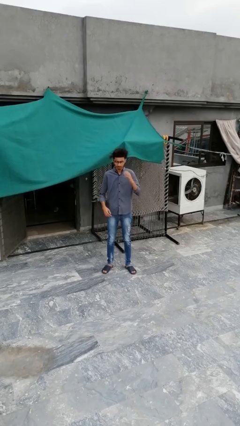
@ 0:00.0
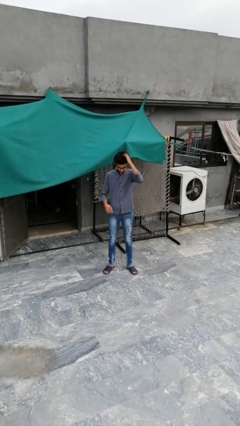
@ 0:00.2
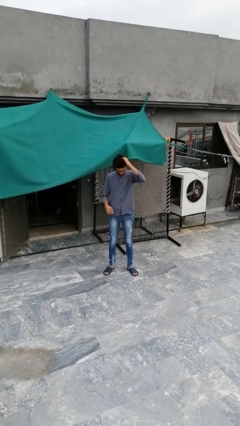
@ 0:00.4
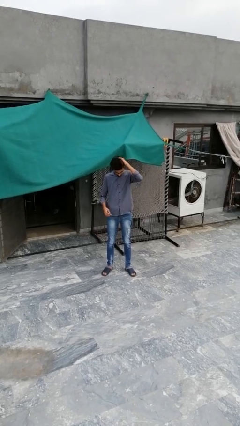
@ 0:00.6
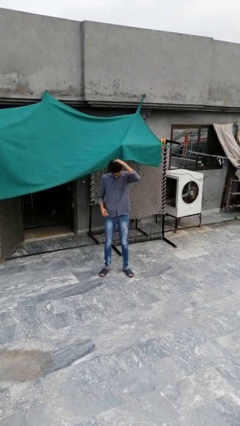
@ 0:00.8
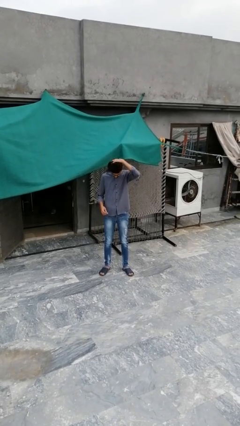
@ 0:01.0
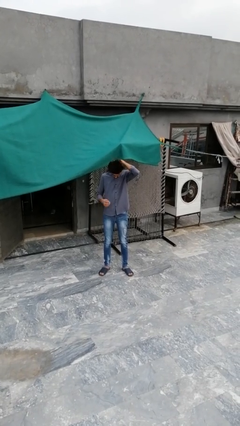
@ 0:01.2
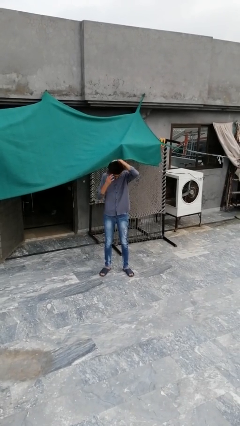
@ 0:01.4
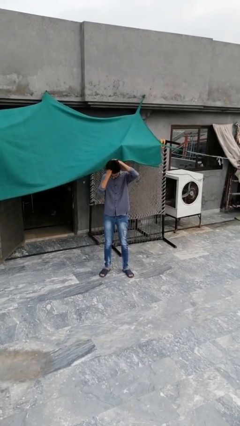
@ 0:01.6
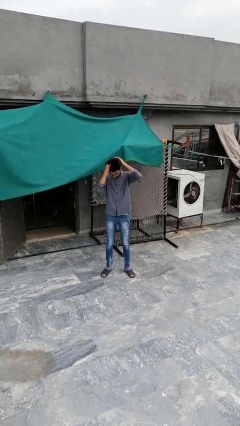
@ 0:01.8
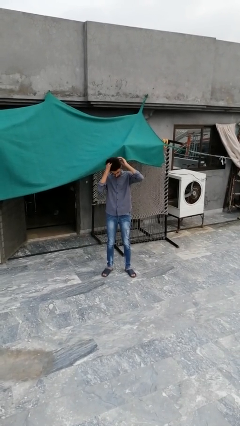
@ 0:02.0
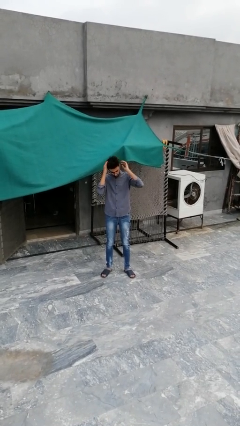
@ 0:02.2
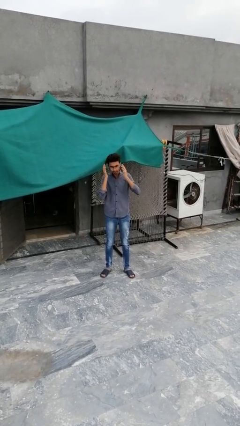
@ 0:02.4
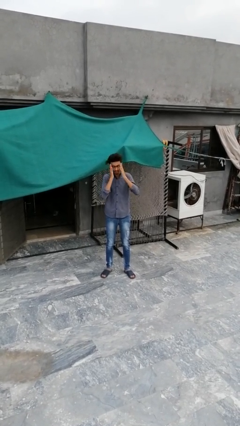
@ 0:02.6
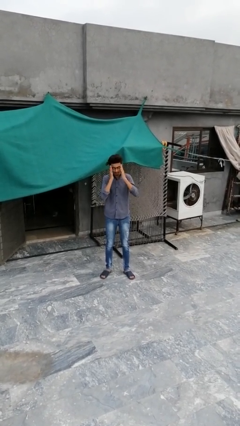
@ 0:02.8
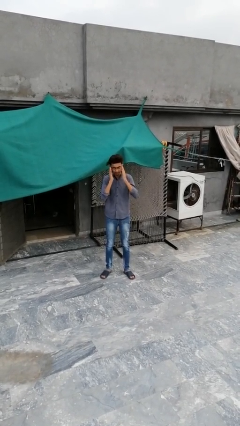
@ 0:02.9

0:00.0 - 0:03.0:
person strokes hair

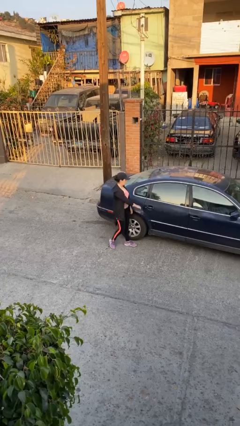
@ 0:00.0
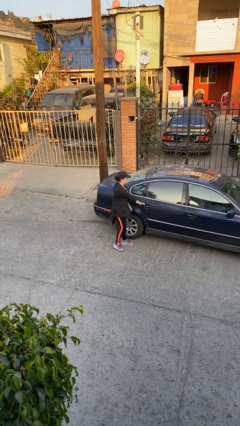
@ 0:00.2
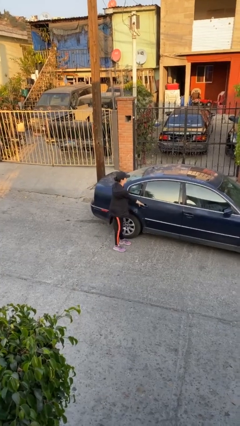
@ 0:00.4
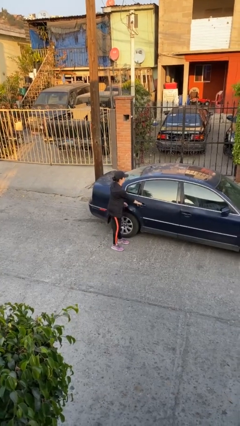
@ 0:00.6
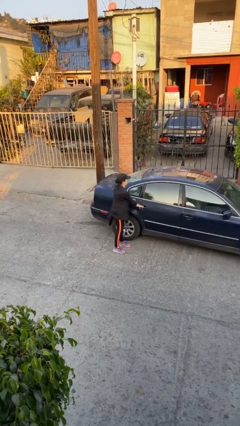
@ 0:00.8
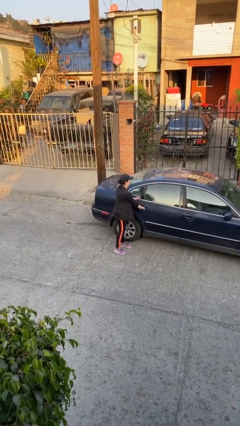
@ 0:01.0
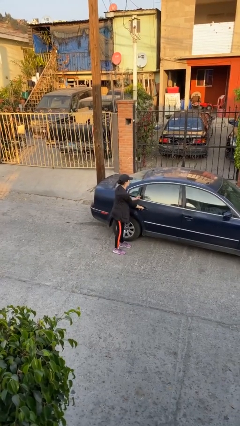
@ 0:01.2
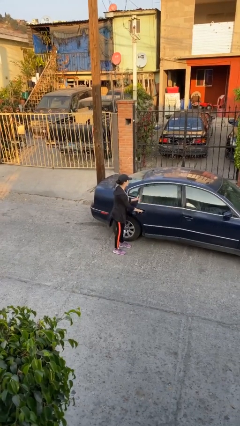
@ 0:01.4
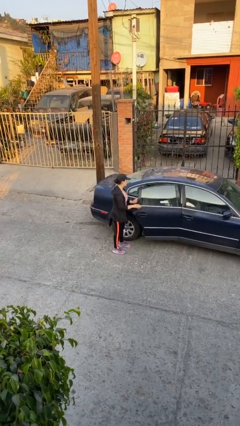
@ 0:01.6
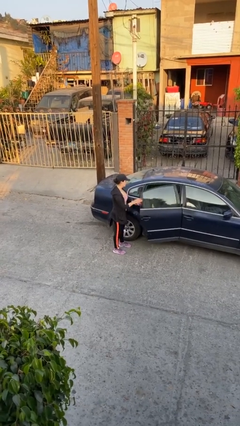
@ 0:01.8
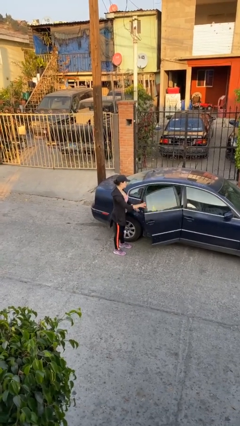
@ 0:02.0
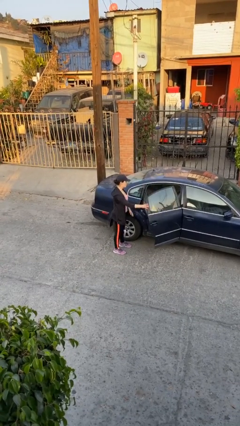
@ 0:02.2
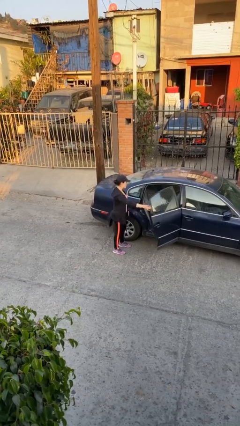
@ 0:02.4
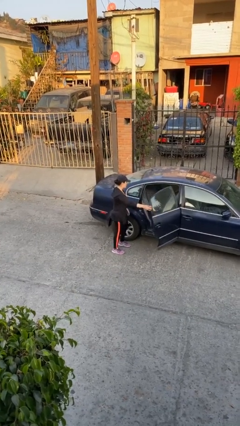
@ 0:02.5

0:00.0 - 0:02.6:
person opens car door

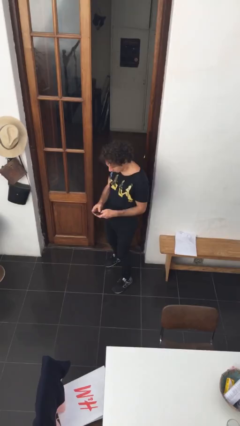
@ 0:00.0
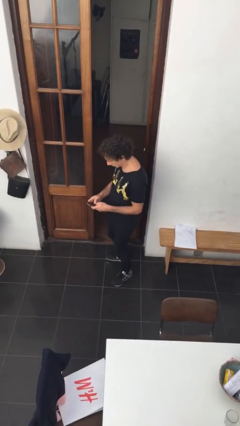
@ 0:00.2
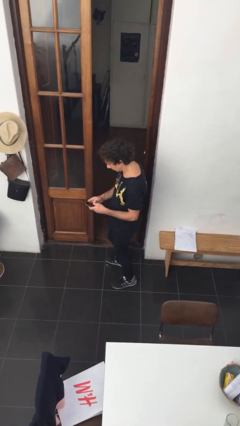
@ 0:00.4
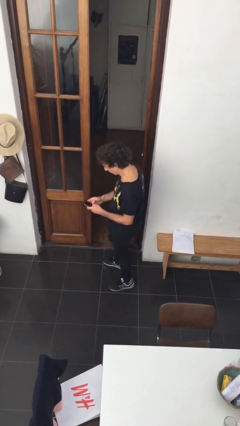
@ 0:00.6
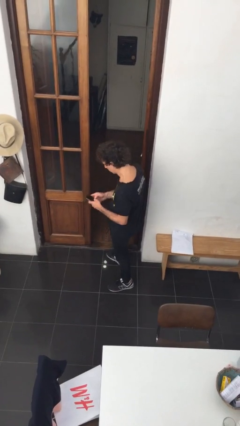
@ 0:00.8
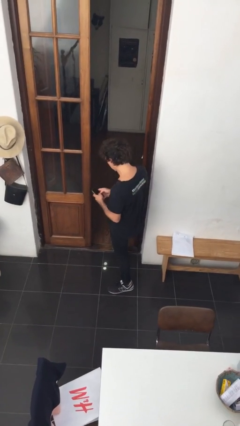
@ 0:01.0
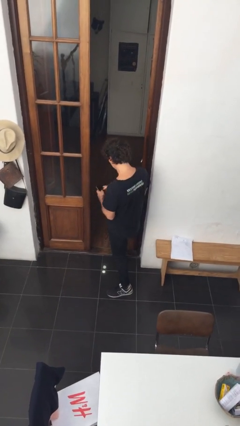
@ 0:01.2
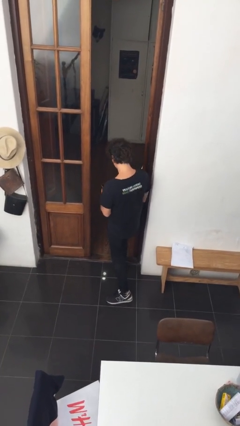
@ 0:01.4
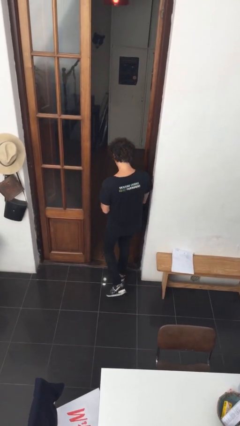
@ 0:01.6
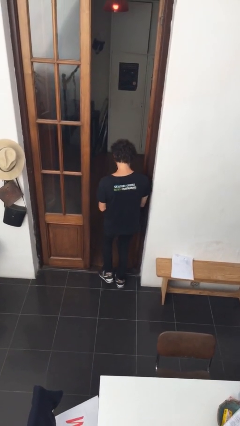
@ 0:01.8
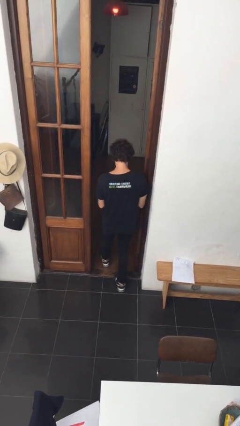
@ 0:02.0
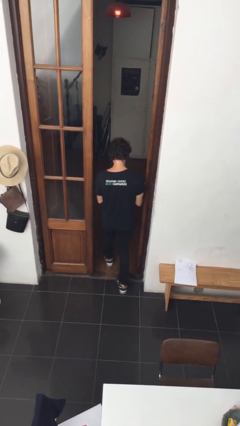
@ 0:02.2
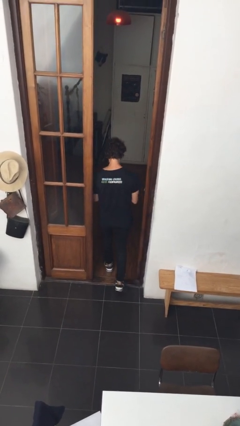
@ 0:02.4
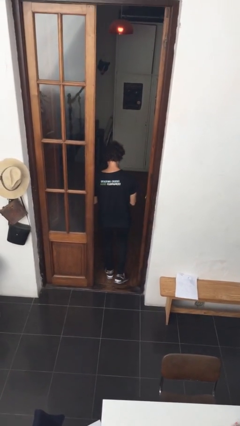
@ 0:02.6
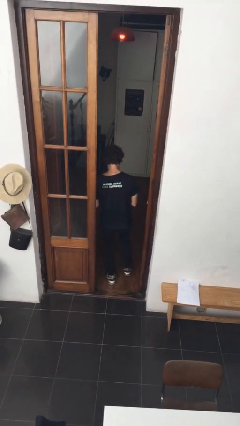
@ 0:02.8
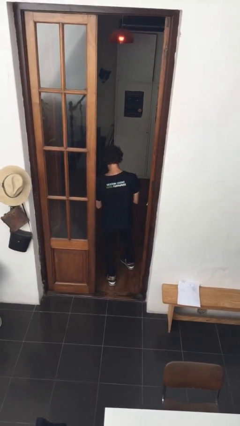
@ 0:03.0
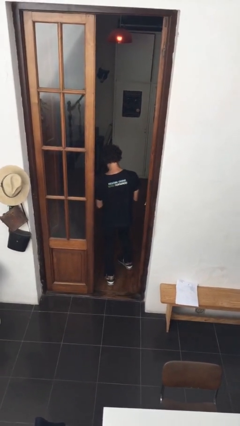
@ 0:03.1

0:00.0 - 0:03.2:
person exits scene through structure

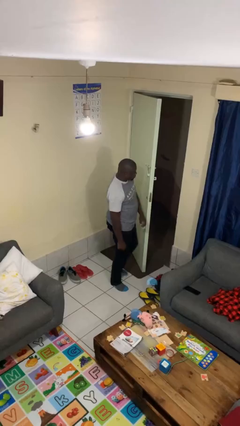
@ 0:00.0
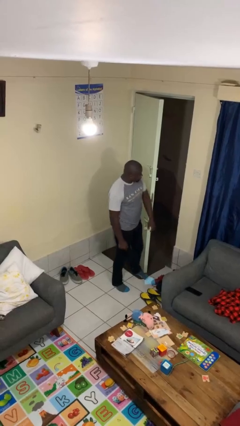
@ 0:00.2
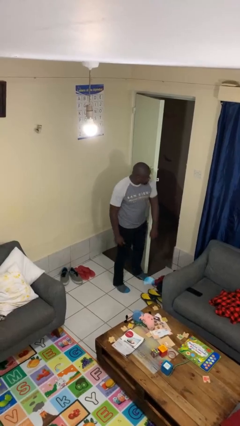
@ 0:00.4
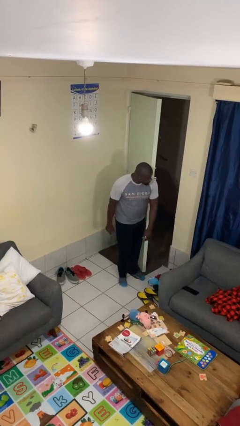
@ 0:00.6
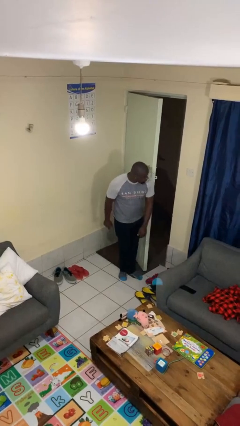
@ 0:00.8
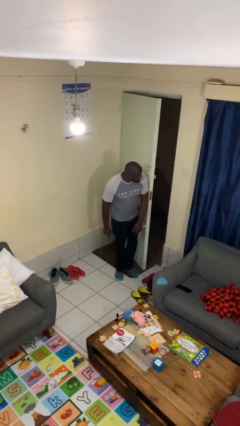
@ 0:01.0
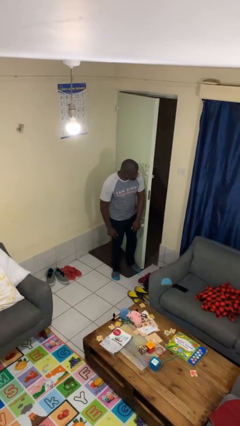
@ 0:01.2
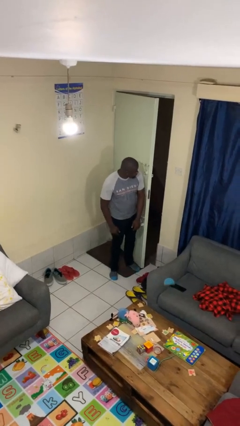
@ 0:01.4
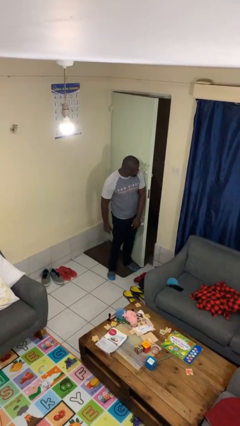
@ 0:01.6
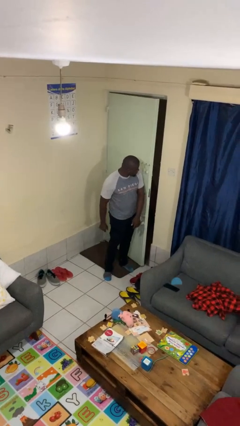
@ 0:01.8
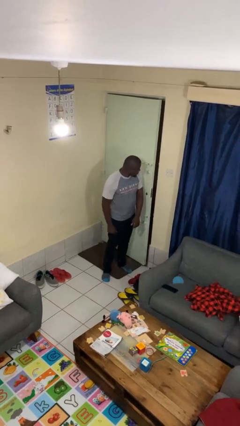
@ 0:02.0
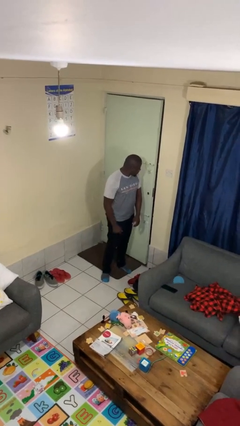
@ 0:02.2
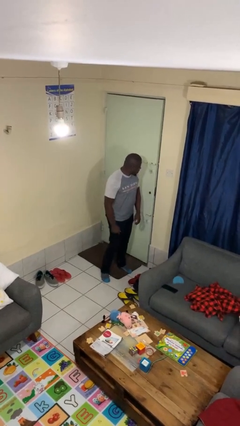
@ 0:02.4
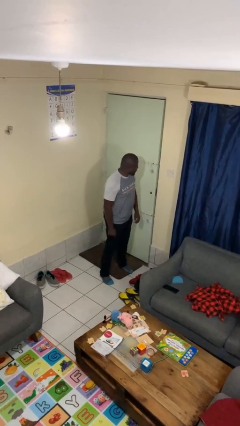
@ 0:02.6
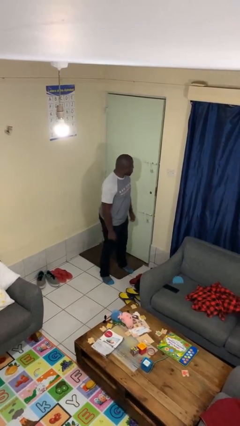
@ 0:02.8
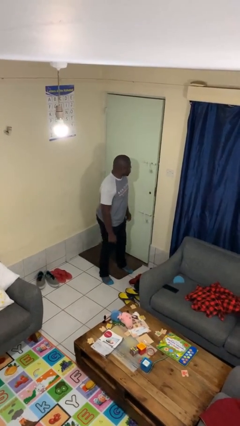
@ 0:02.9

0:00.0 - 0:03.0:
person closes door with hip

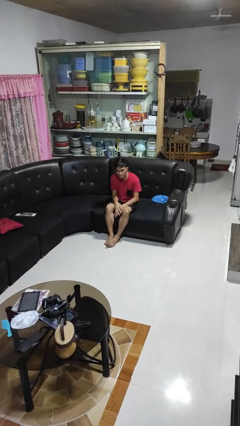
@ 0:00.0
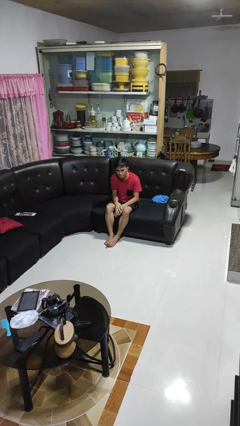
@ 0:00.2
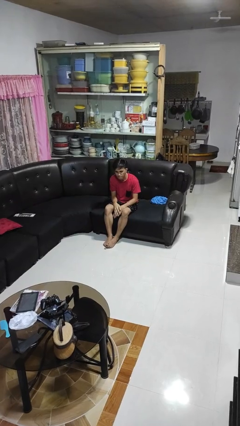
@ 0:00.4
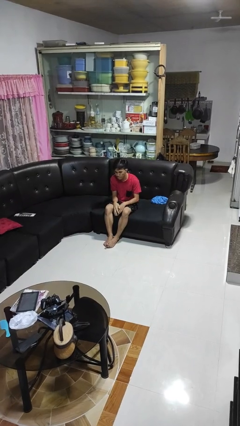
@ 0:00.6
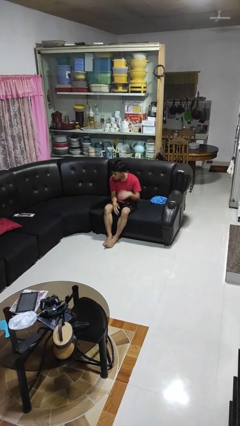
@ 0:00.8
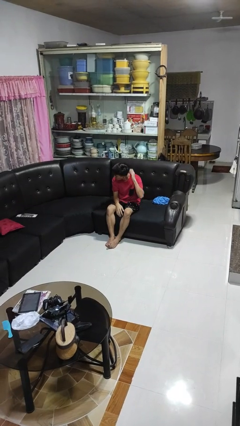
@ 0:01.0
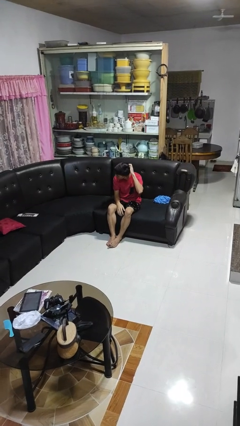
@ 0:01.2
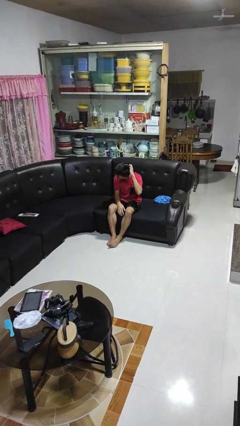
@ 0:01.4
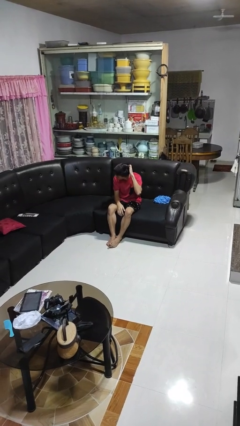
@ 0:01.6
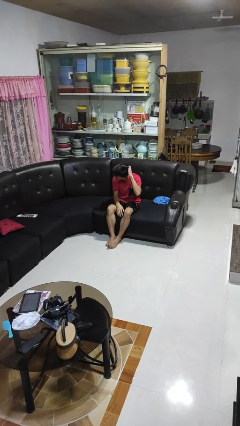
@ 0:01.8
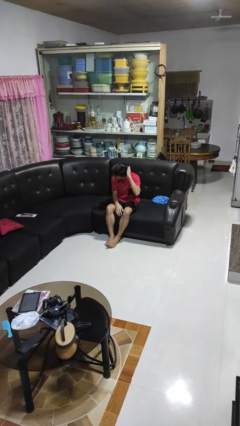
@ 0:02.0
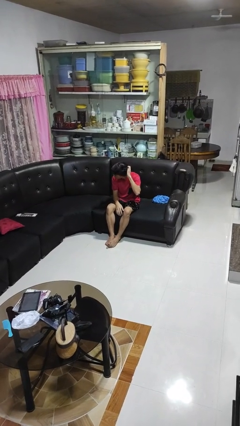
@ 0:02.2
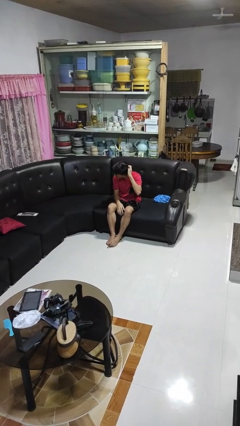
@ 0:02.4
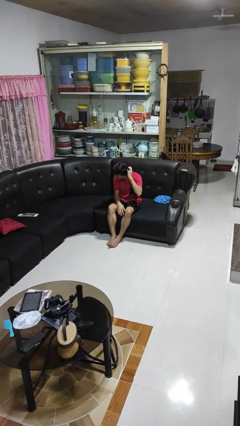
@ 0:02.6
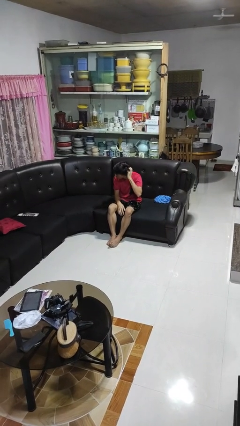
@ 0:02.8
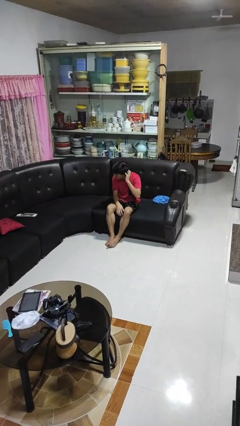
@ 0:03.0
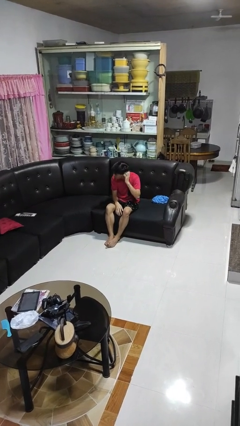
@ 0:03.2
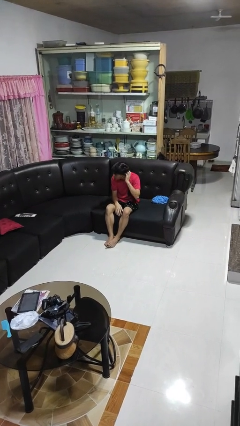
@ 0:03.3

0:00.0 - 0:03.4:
person scratches face

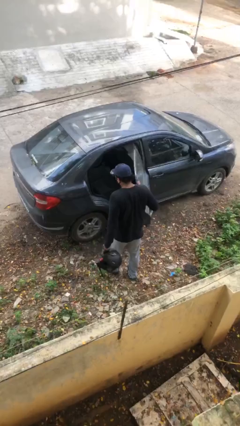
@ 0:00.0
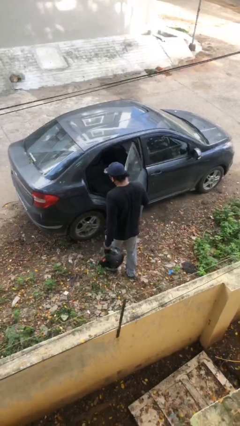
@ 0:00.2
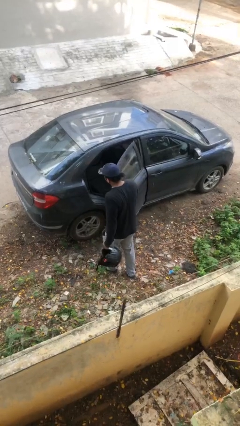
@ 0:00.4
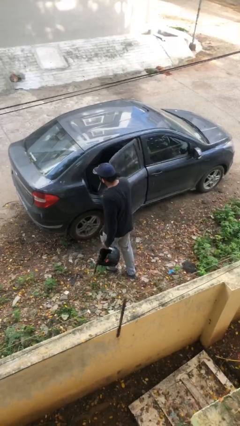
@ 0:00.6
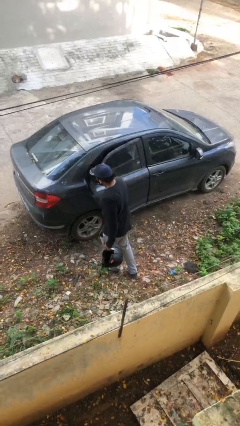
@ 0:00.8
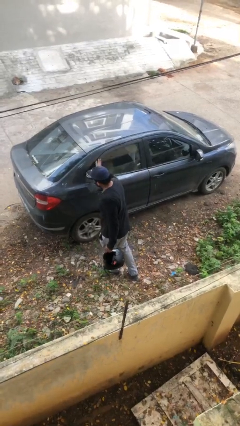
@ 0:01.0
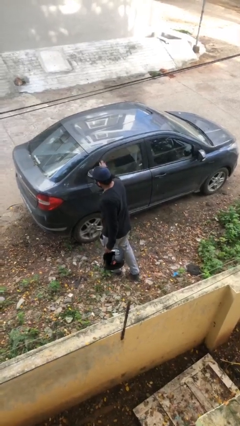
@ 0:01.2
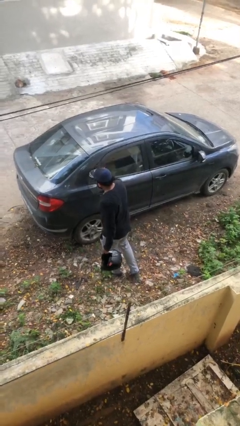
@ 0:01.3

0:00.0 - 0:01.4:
person closes car door

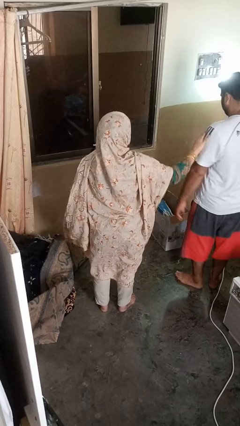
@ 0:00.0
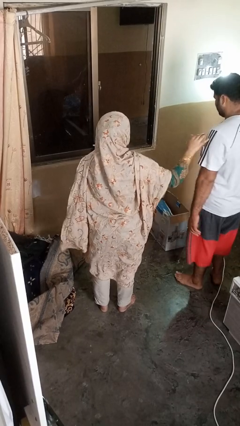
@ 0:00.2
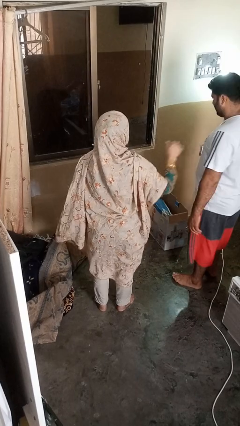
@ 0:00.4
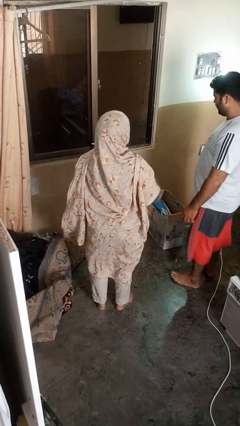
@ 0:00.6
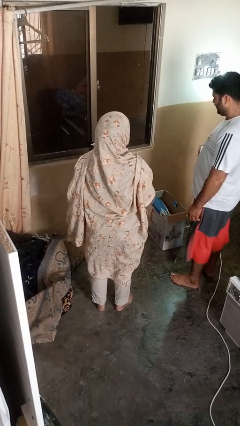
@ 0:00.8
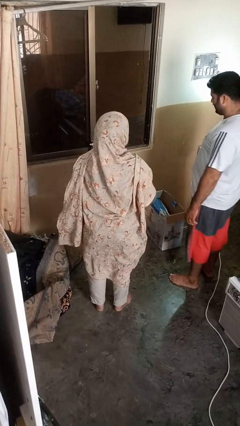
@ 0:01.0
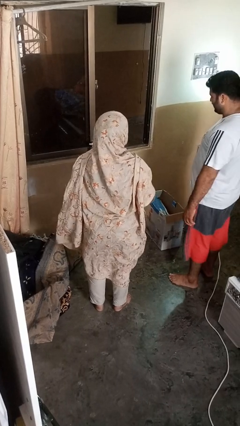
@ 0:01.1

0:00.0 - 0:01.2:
person spins person around
